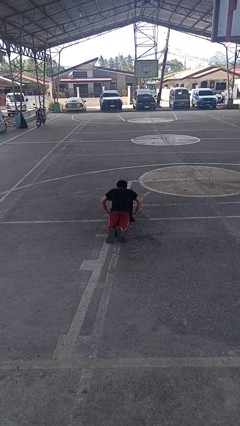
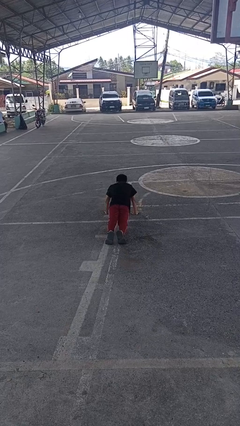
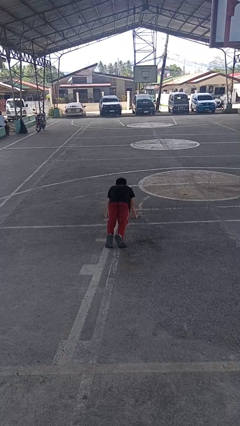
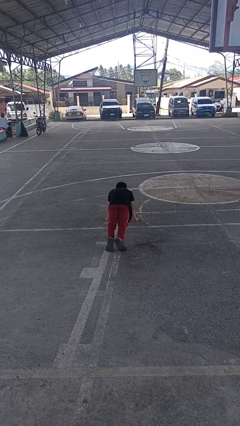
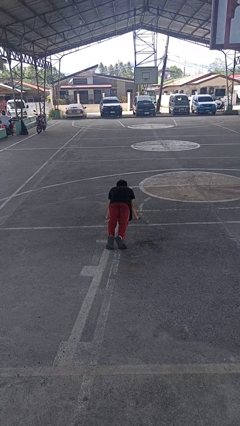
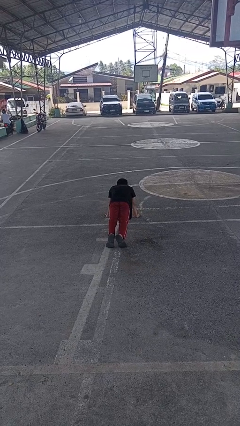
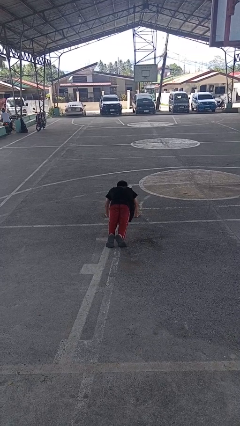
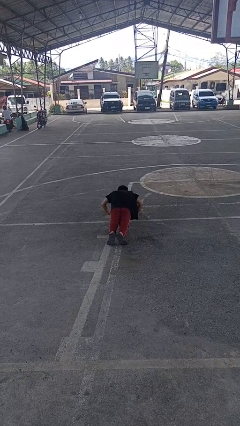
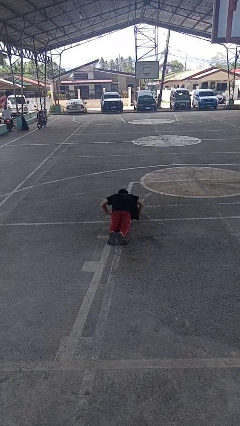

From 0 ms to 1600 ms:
person exercises with pushup

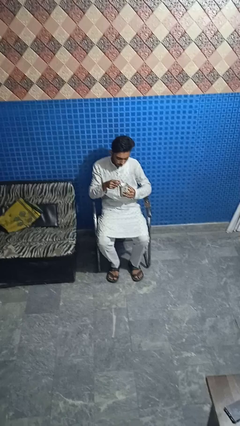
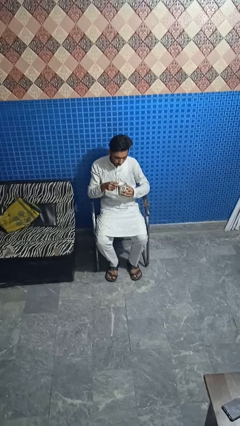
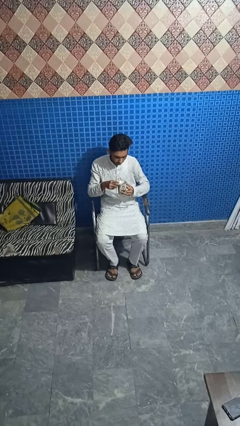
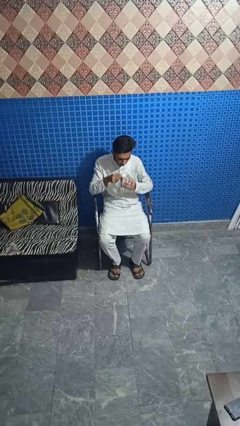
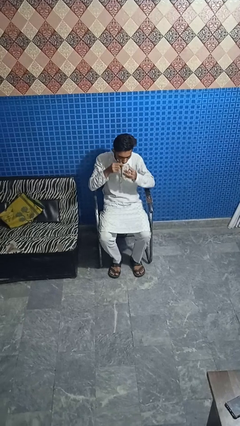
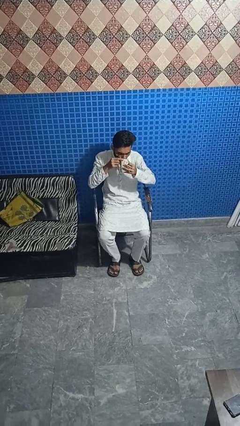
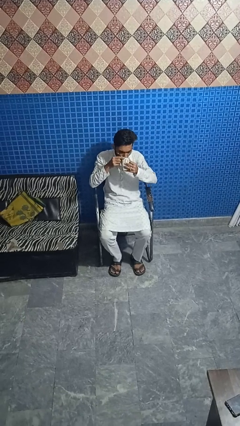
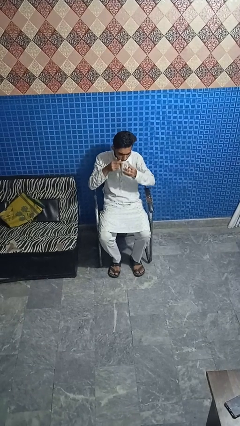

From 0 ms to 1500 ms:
person drinks from mug

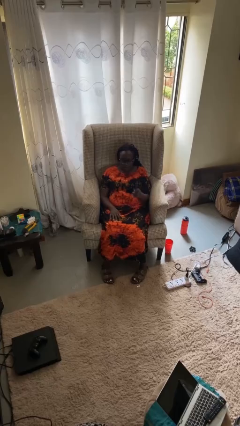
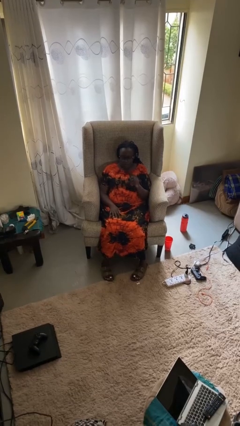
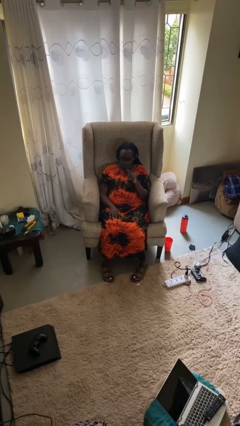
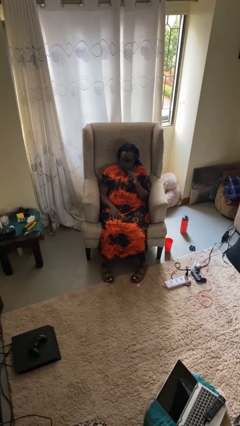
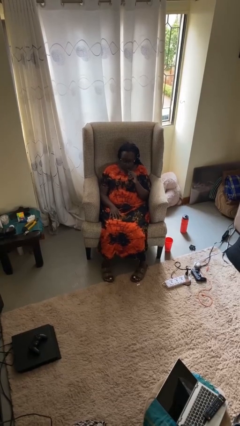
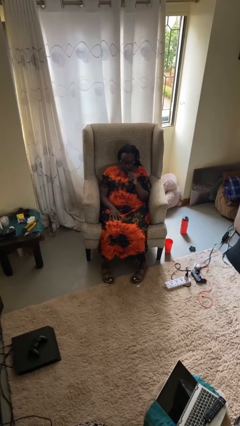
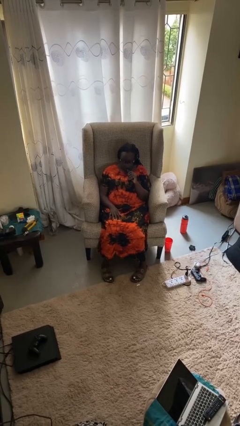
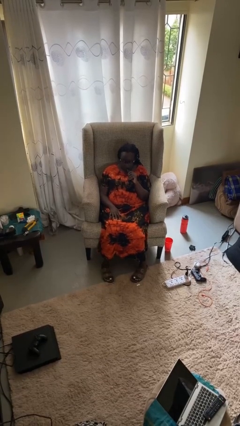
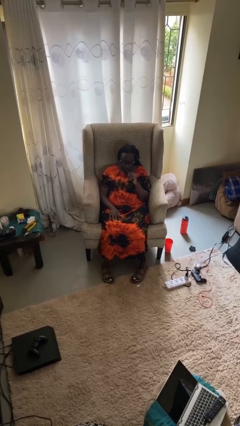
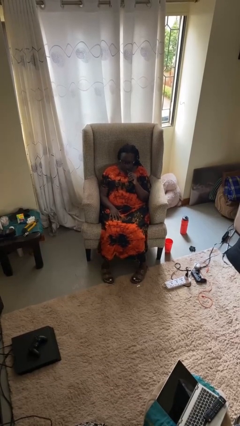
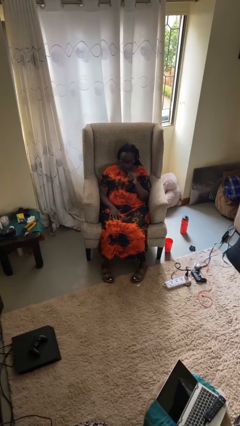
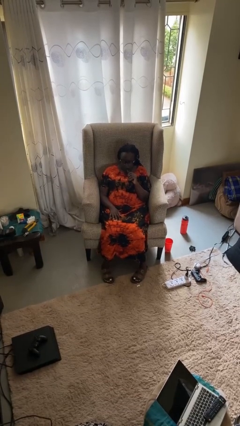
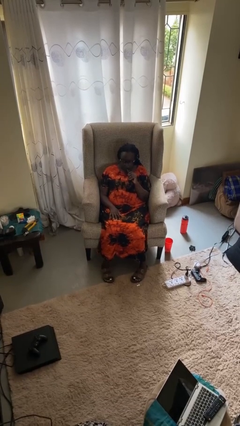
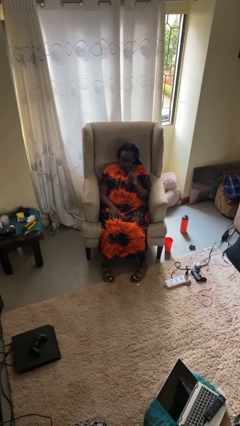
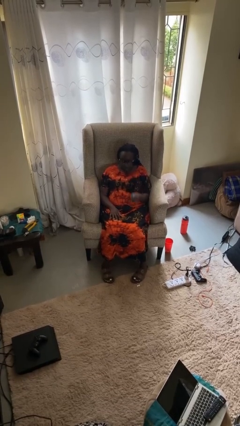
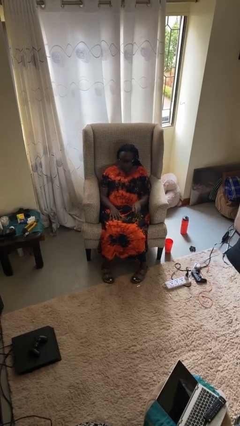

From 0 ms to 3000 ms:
person vapes

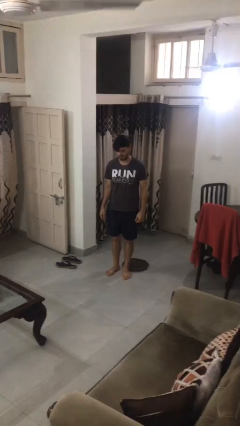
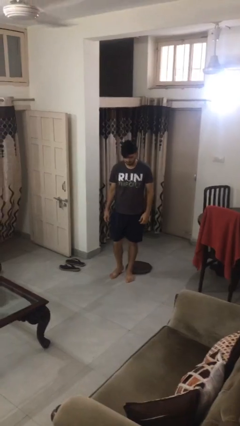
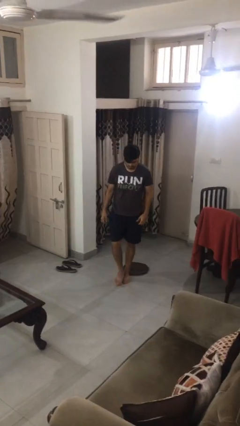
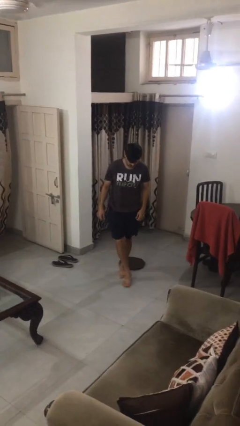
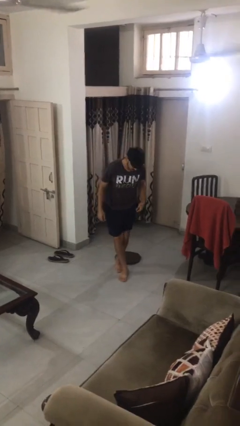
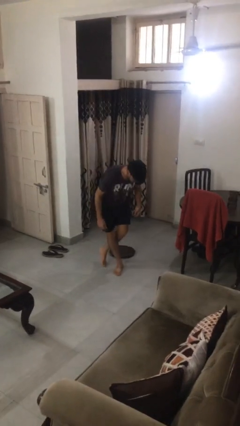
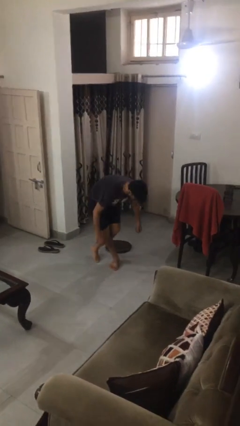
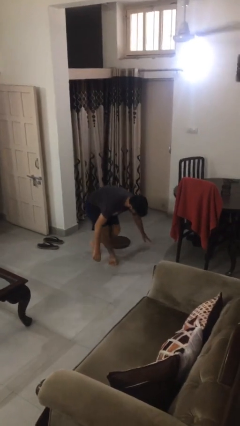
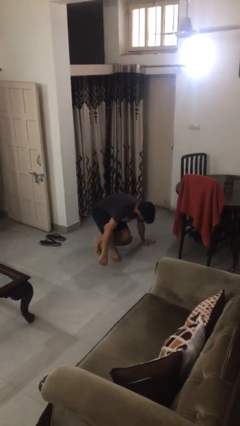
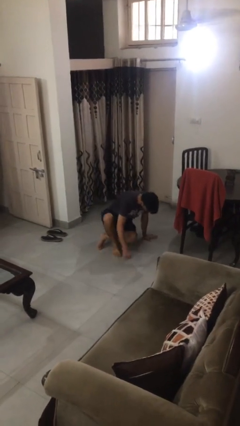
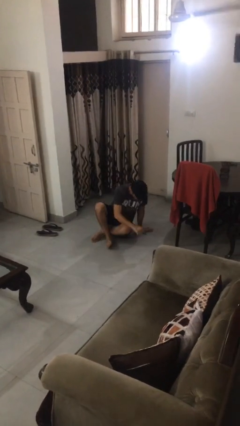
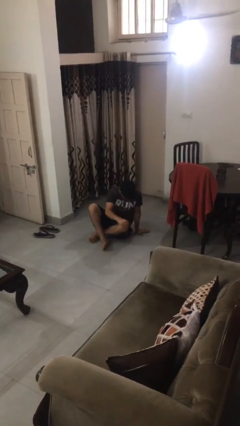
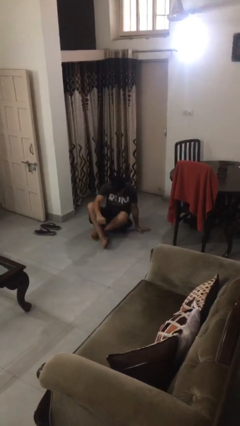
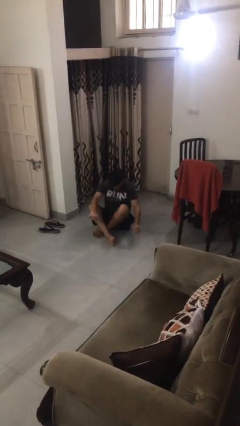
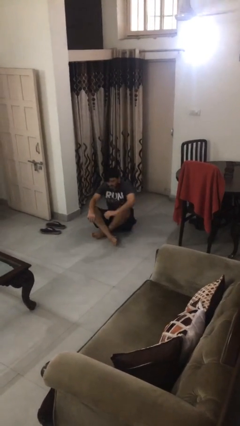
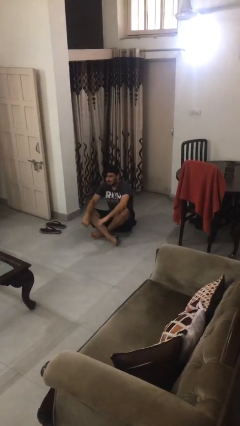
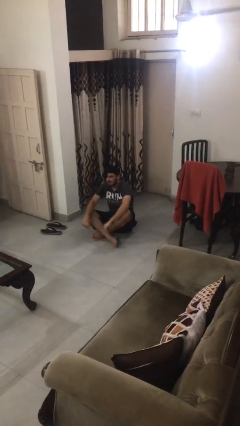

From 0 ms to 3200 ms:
person sits crisscross

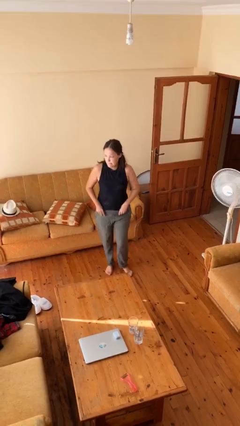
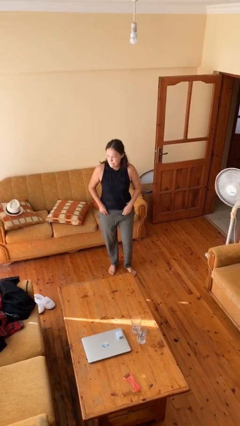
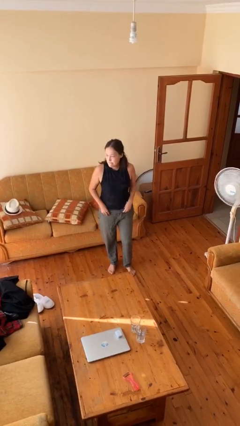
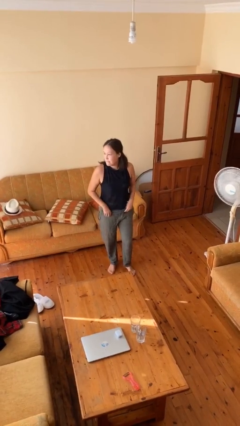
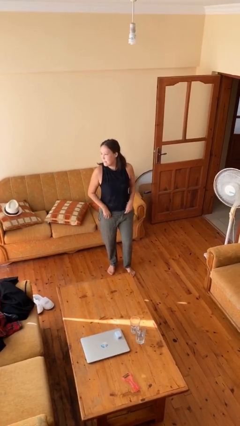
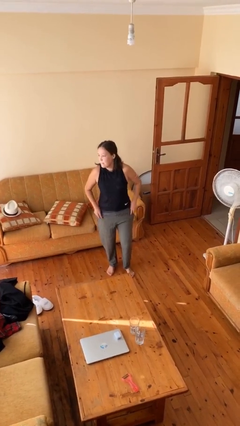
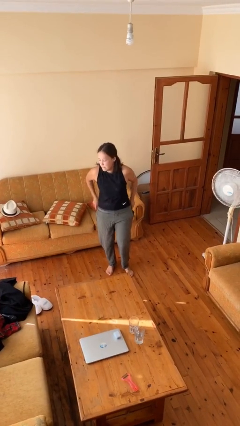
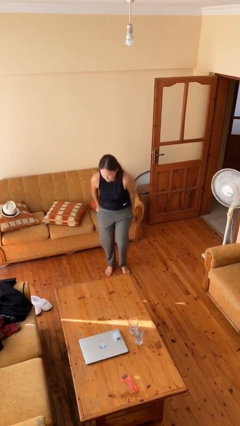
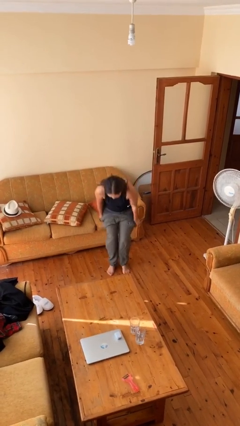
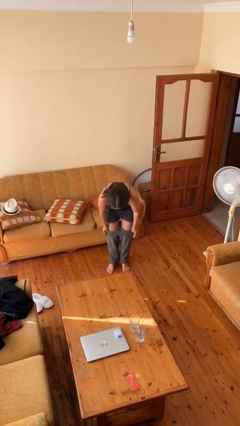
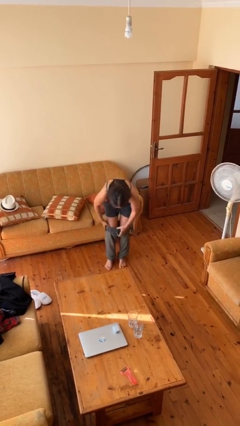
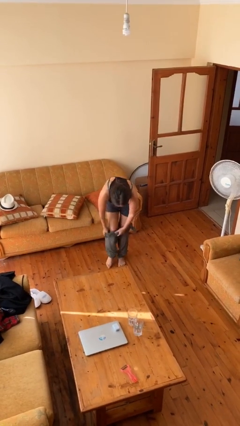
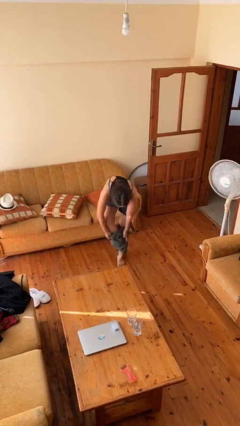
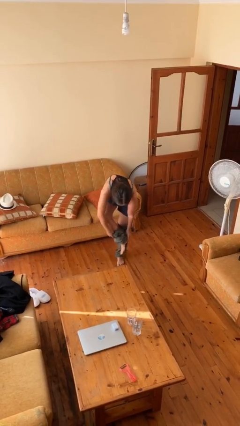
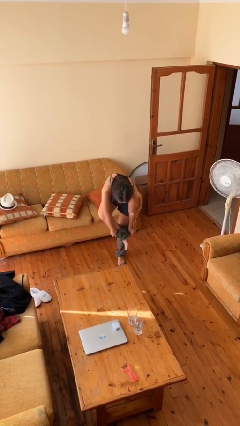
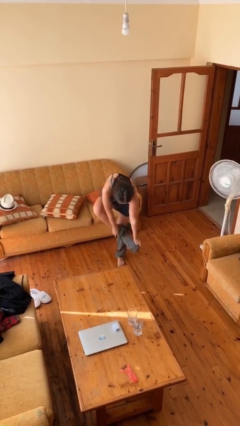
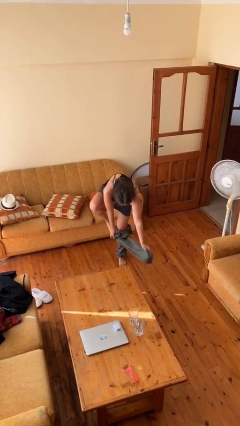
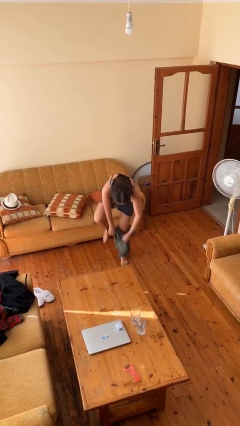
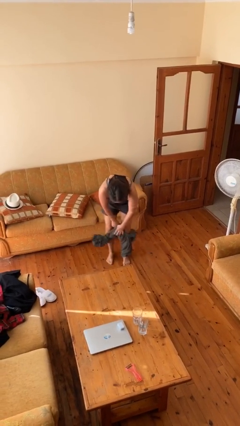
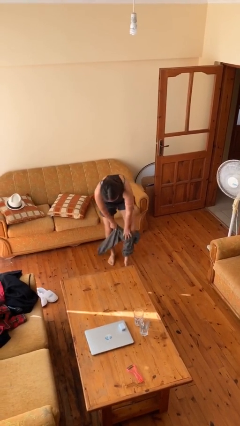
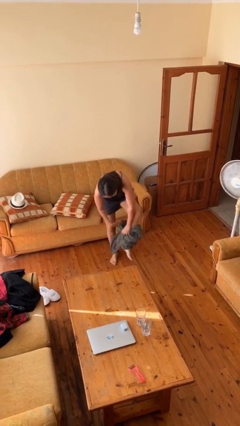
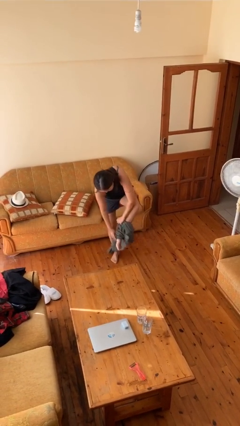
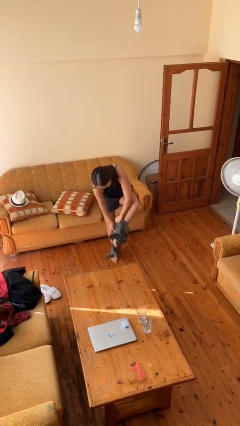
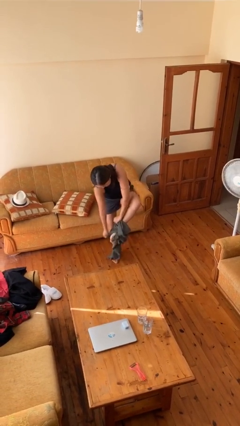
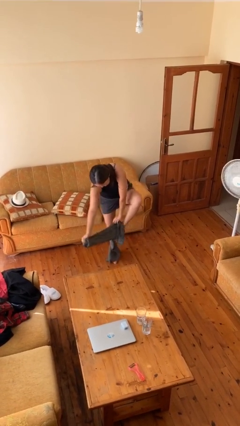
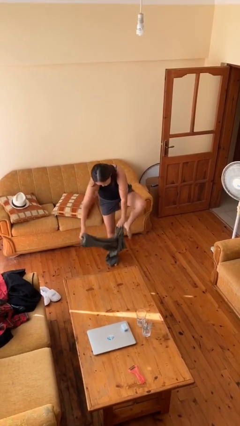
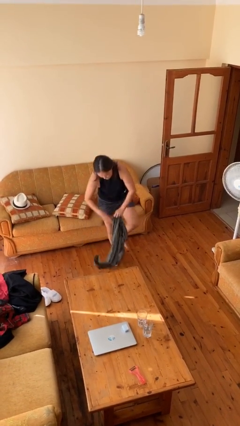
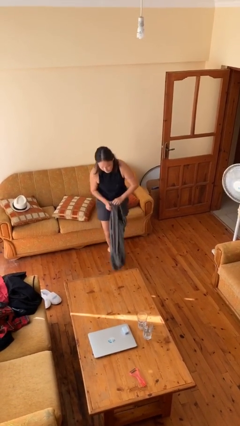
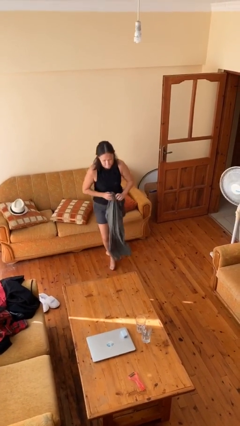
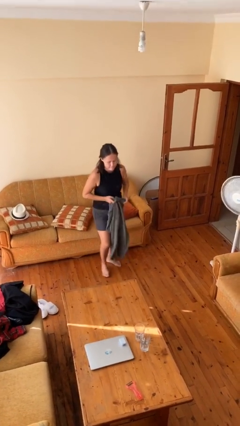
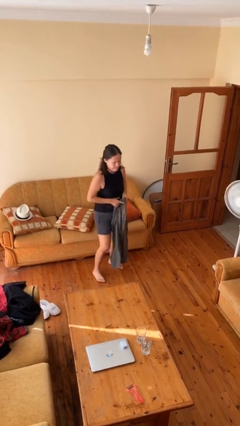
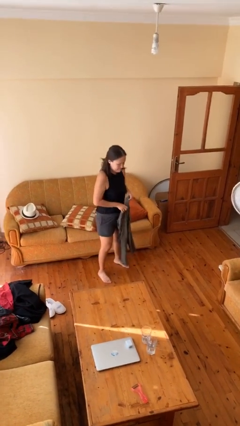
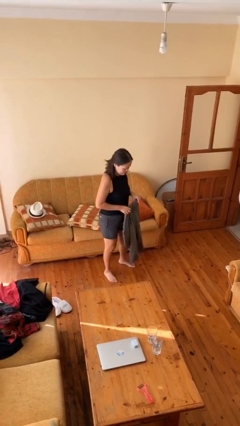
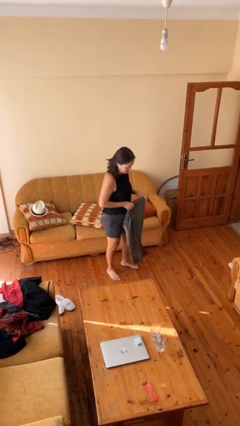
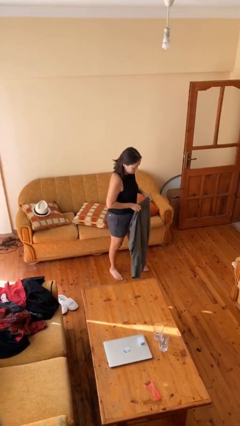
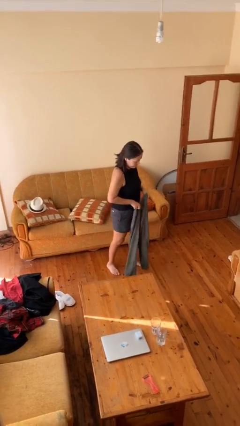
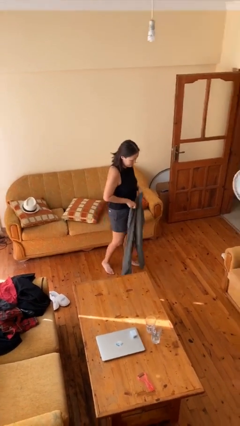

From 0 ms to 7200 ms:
person takes off pants

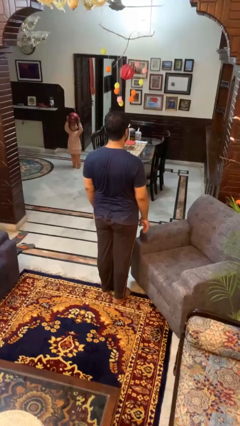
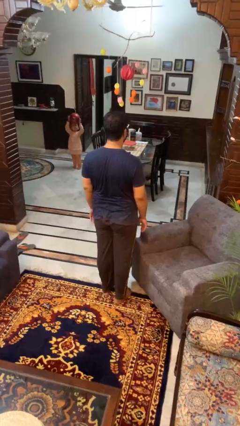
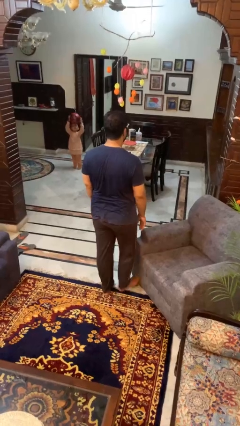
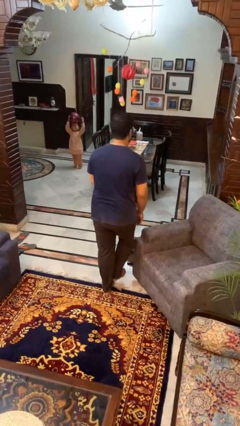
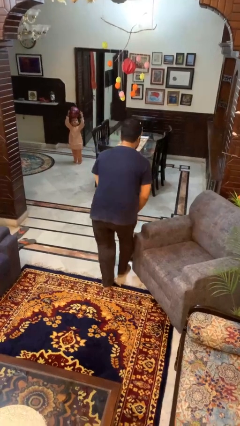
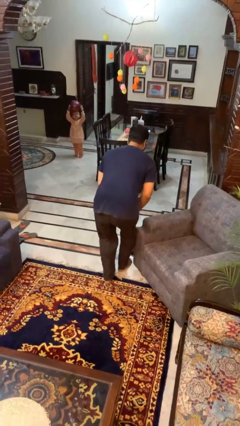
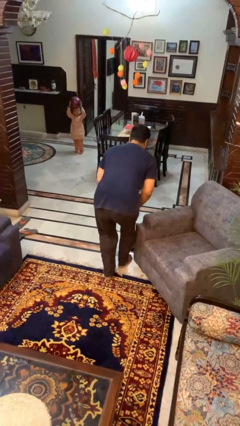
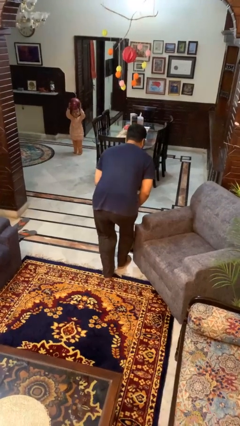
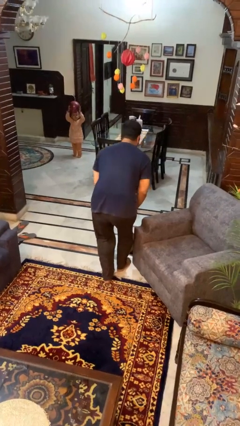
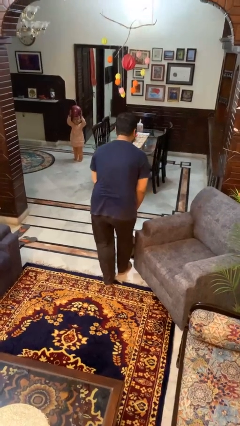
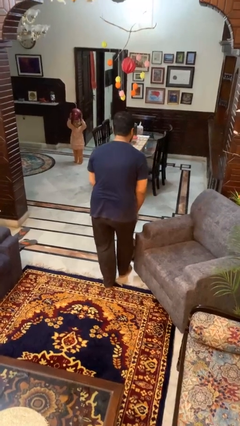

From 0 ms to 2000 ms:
person stubs toe
